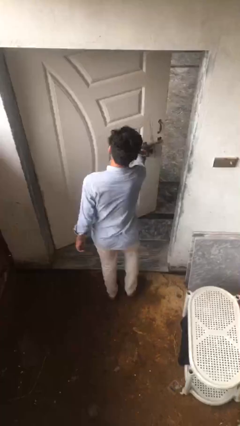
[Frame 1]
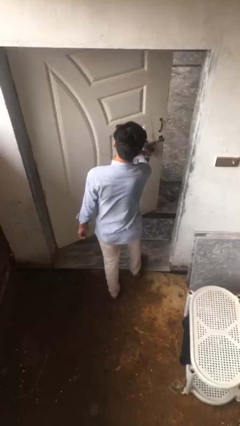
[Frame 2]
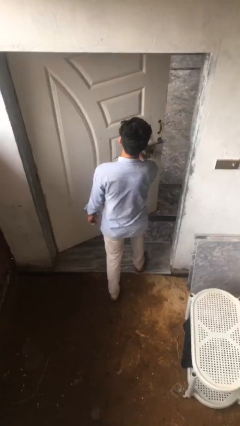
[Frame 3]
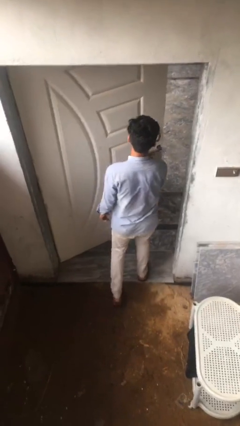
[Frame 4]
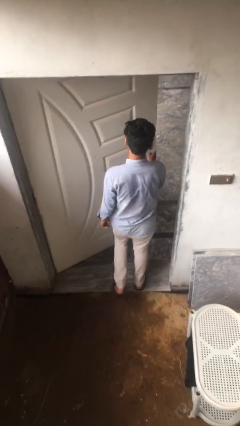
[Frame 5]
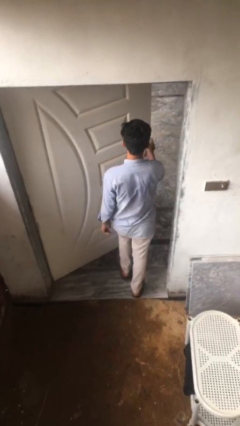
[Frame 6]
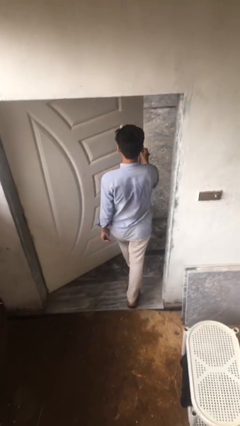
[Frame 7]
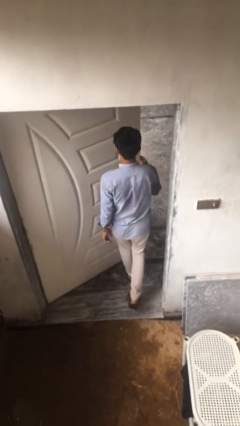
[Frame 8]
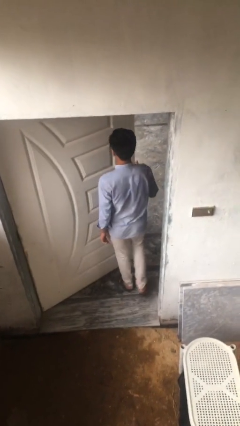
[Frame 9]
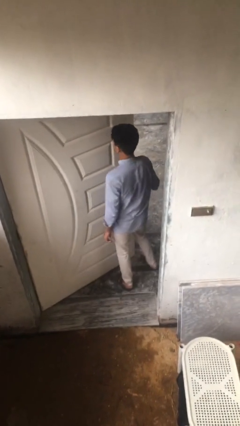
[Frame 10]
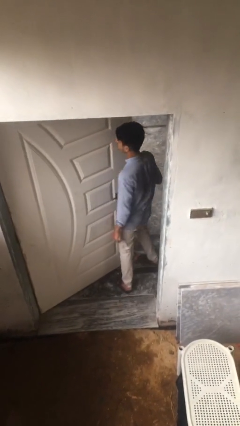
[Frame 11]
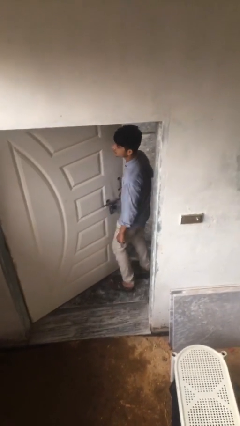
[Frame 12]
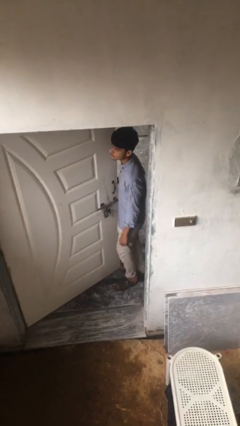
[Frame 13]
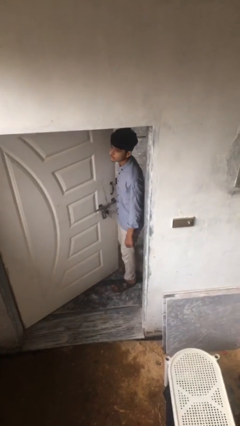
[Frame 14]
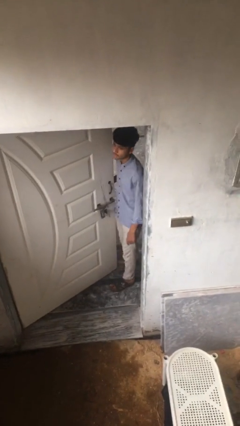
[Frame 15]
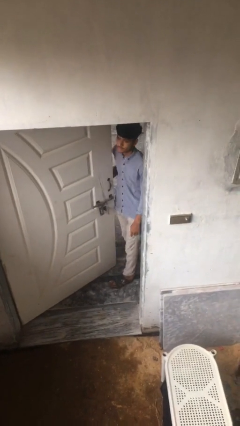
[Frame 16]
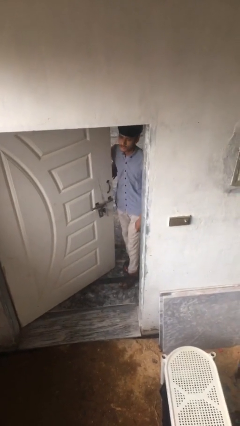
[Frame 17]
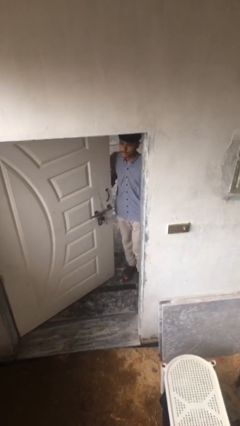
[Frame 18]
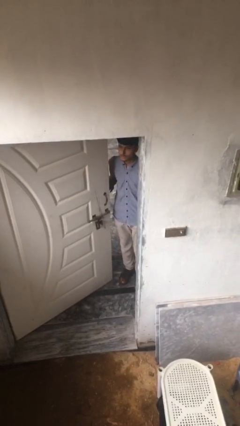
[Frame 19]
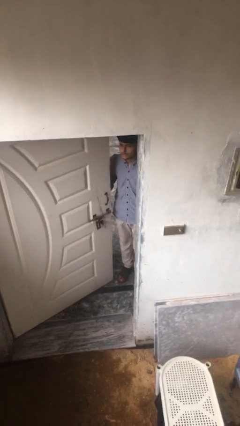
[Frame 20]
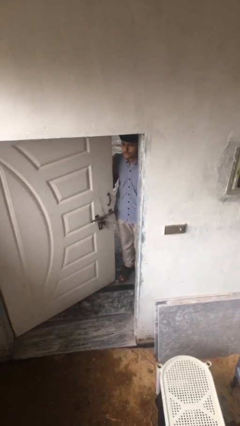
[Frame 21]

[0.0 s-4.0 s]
person exits scene through structure

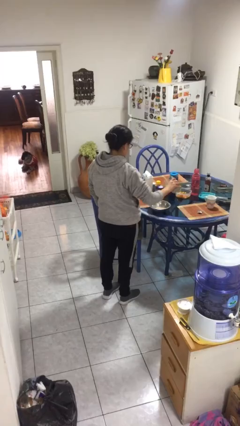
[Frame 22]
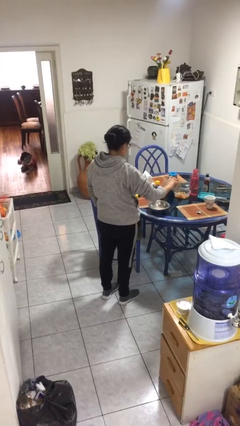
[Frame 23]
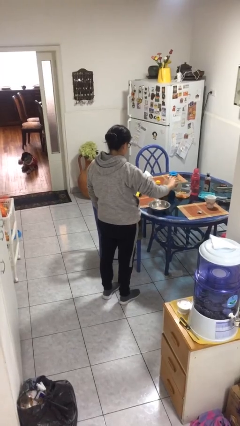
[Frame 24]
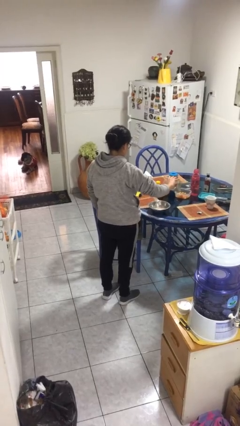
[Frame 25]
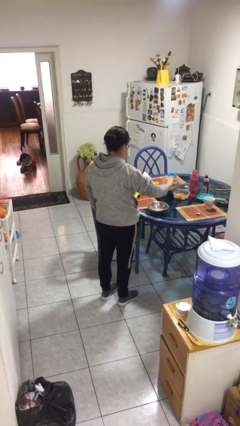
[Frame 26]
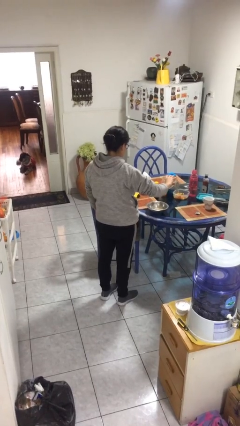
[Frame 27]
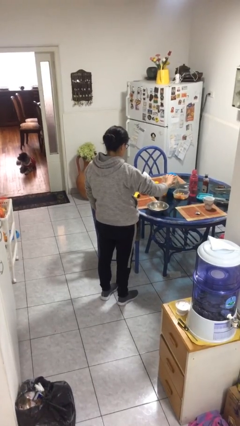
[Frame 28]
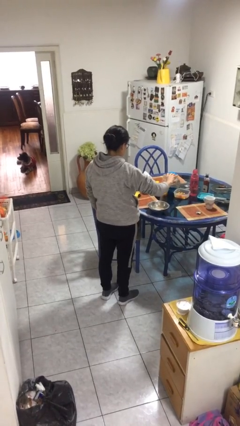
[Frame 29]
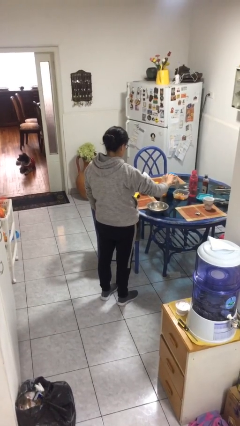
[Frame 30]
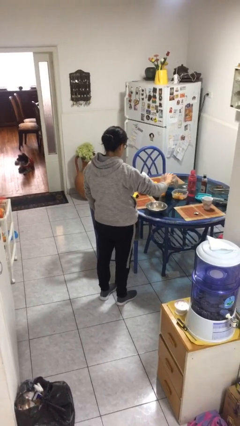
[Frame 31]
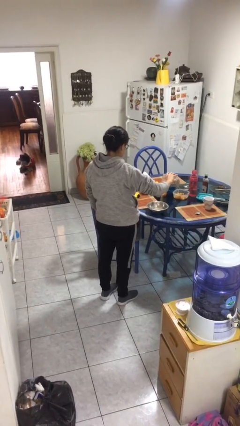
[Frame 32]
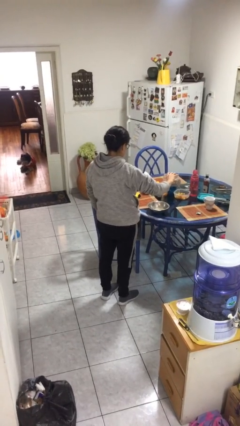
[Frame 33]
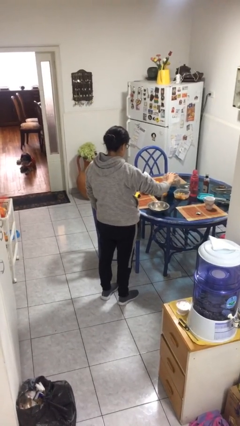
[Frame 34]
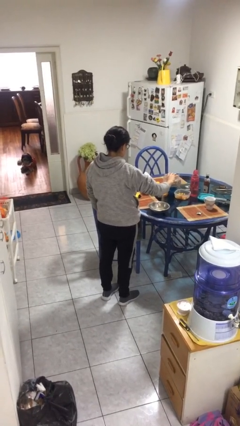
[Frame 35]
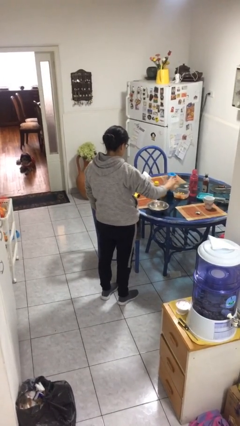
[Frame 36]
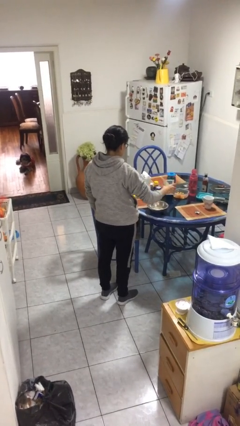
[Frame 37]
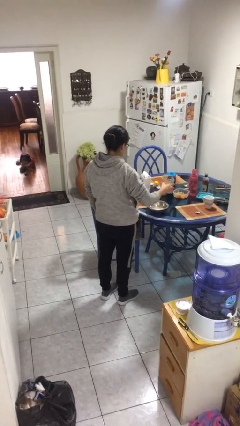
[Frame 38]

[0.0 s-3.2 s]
person pours into bowl

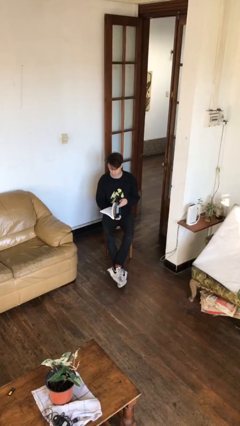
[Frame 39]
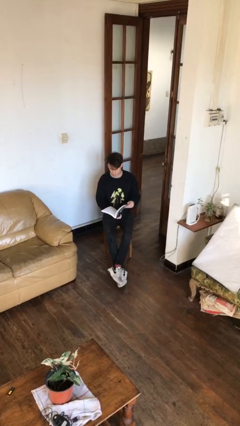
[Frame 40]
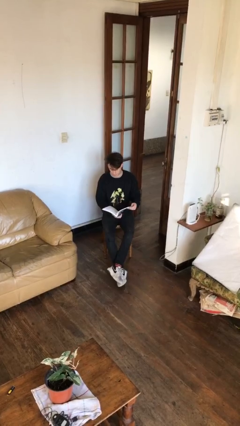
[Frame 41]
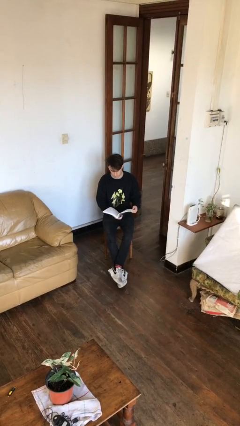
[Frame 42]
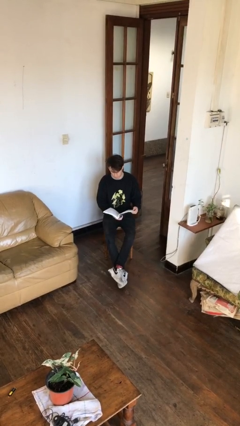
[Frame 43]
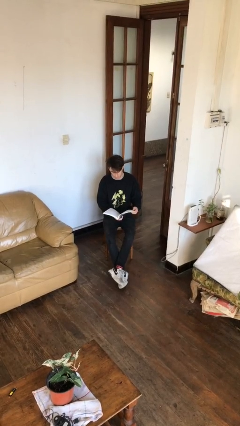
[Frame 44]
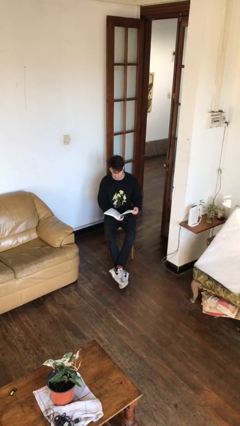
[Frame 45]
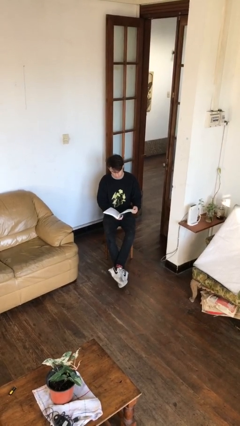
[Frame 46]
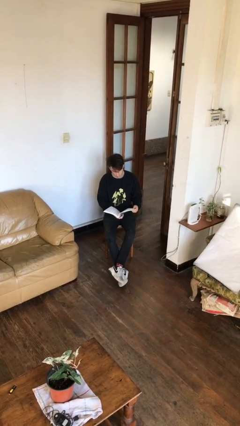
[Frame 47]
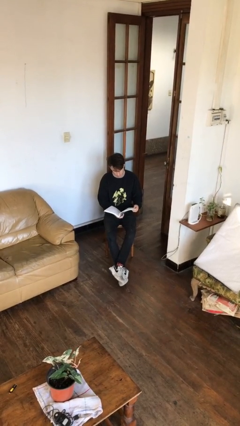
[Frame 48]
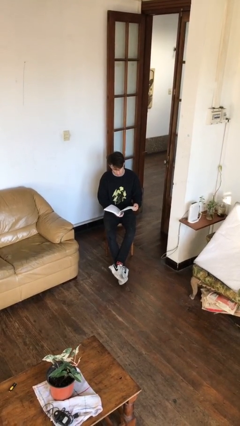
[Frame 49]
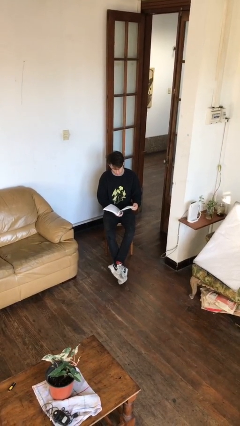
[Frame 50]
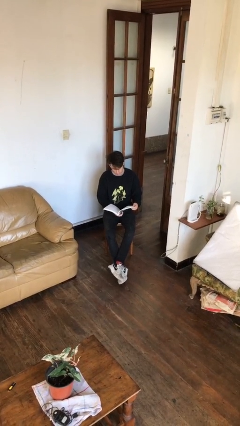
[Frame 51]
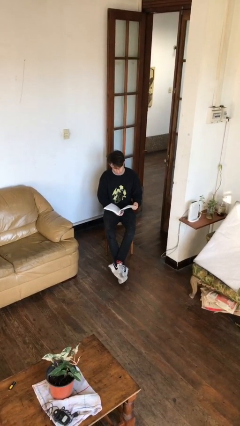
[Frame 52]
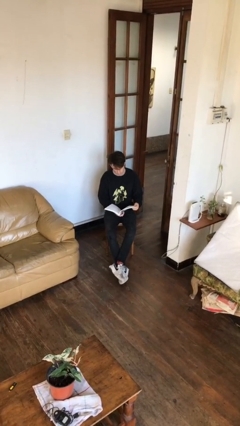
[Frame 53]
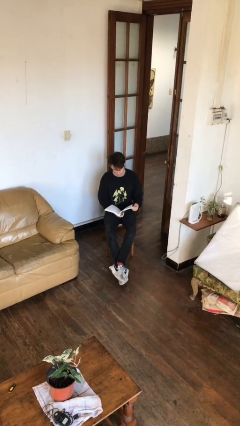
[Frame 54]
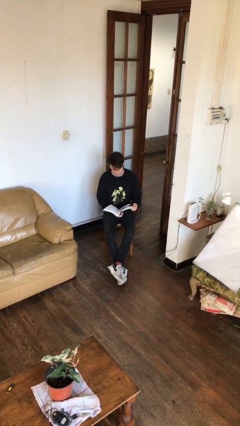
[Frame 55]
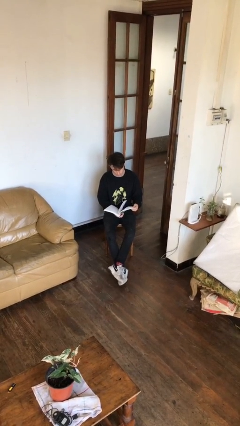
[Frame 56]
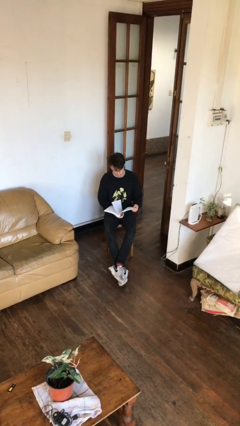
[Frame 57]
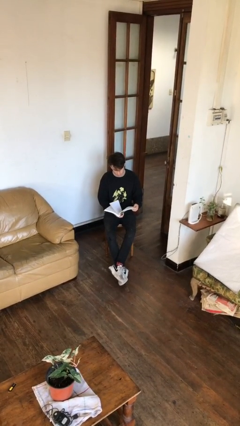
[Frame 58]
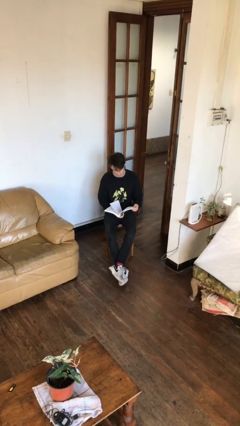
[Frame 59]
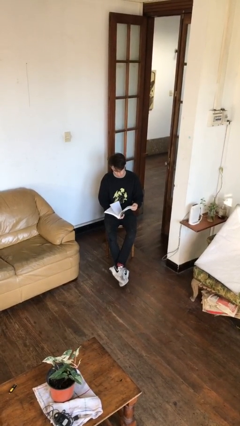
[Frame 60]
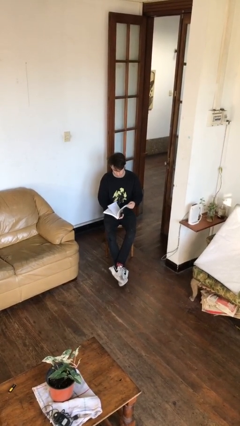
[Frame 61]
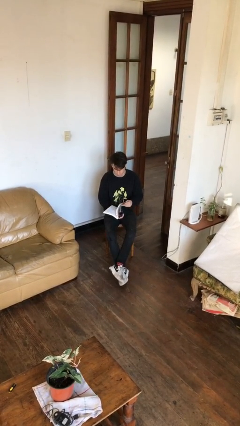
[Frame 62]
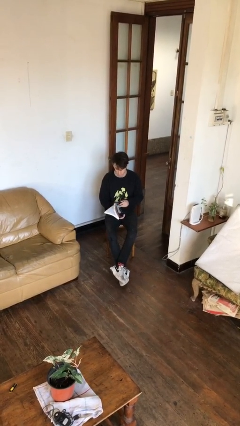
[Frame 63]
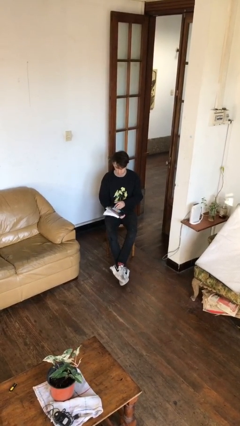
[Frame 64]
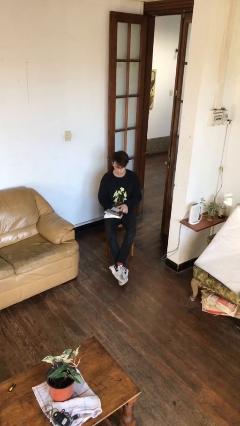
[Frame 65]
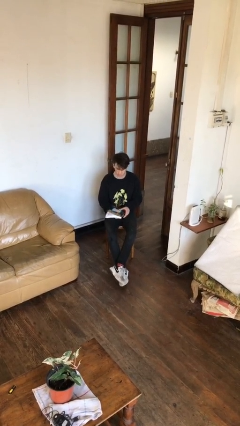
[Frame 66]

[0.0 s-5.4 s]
person reads document

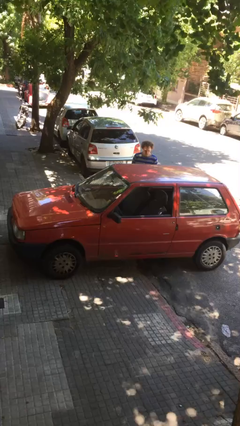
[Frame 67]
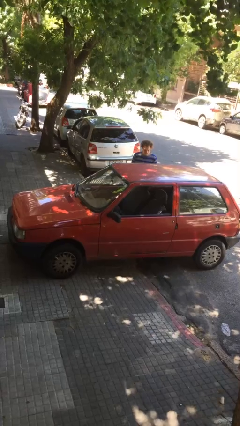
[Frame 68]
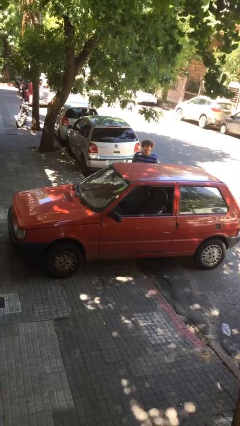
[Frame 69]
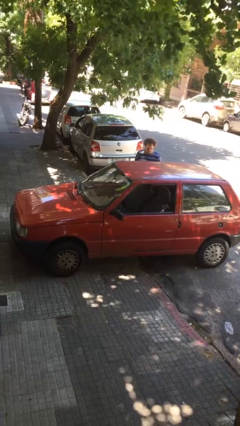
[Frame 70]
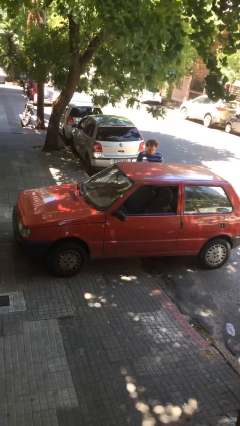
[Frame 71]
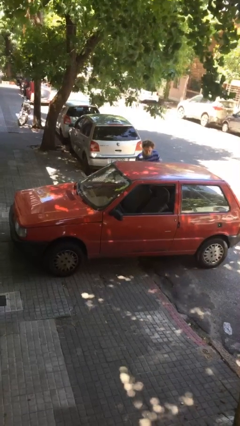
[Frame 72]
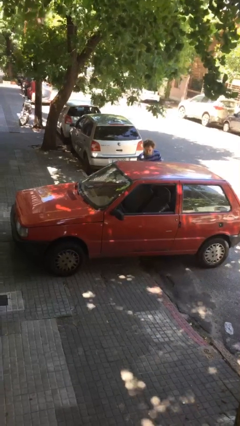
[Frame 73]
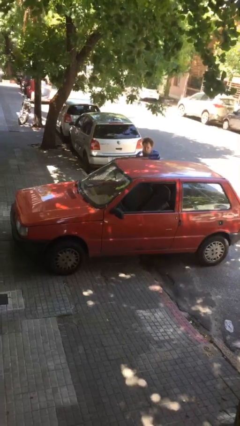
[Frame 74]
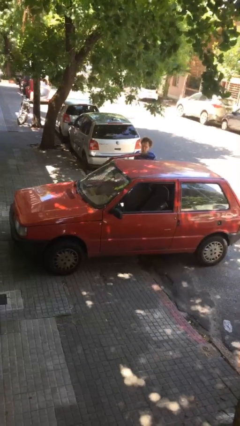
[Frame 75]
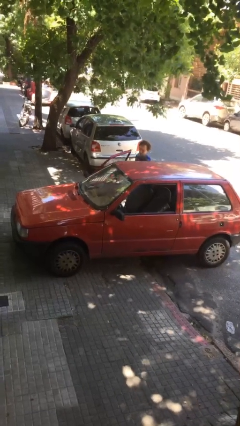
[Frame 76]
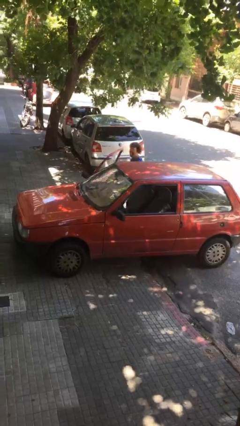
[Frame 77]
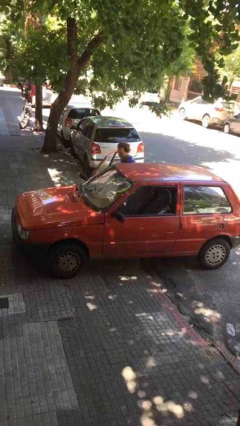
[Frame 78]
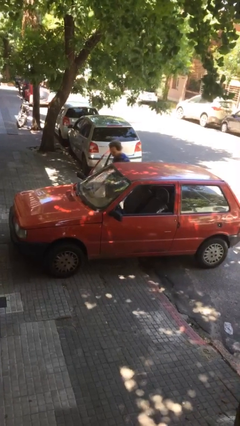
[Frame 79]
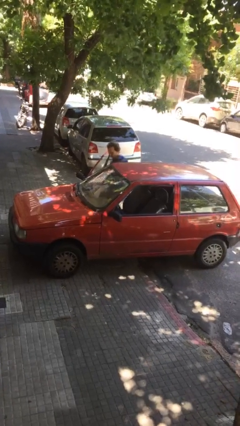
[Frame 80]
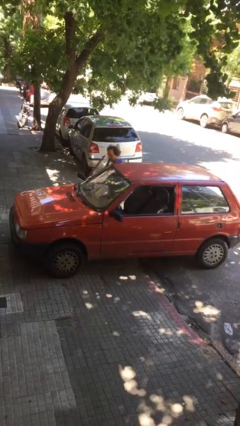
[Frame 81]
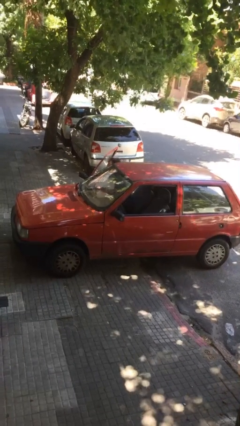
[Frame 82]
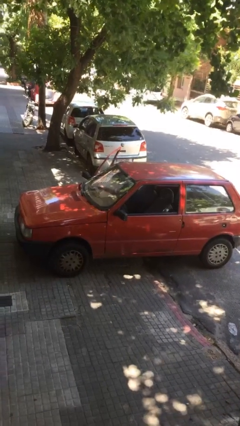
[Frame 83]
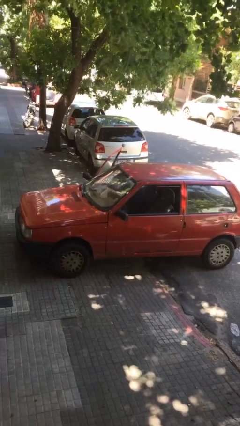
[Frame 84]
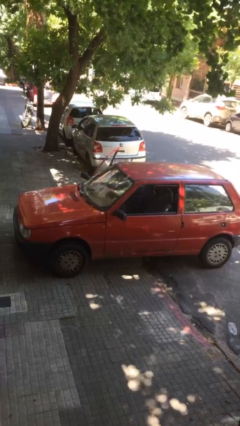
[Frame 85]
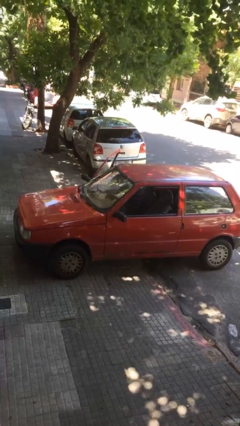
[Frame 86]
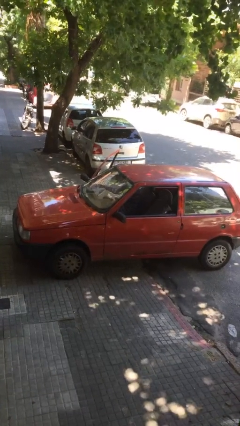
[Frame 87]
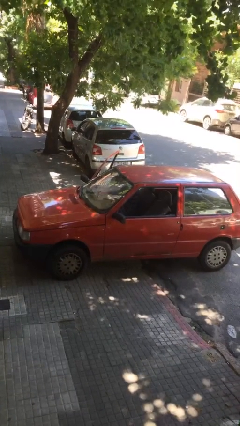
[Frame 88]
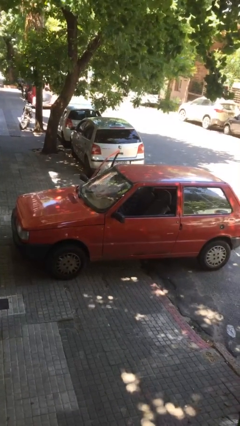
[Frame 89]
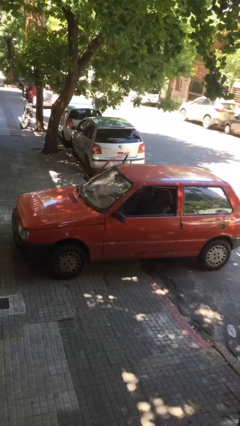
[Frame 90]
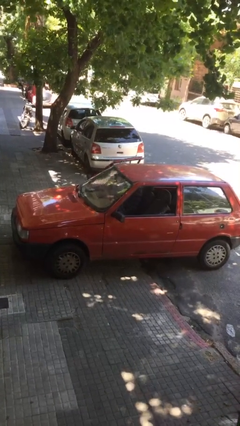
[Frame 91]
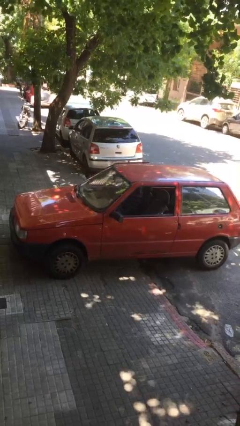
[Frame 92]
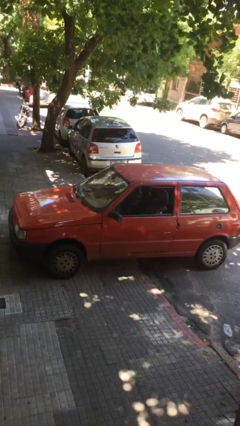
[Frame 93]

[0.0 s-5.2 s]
car picks up person
